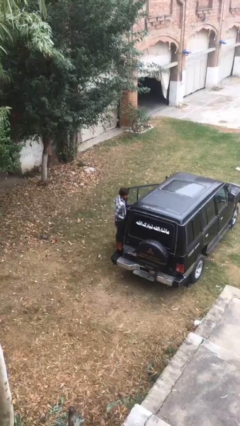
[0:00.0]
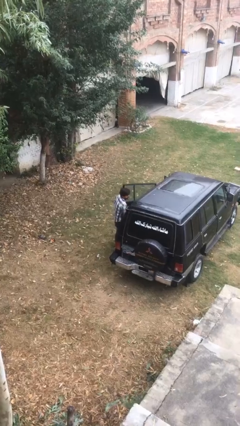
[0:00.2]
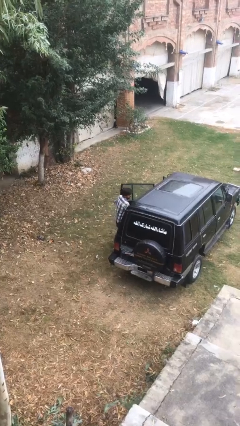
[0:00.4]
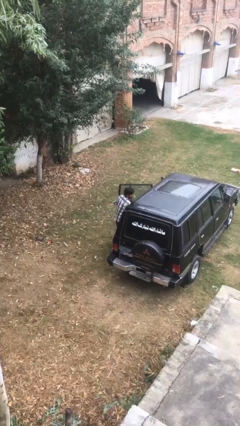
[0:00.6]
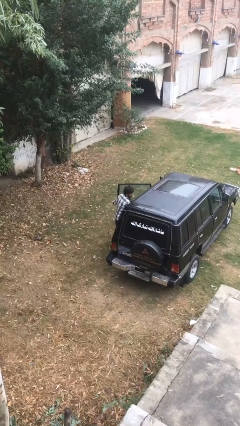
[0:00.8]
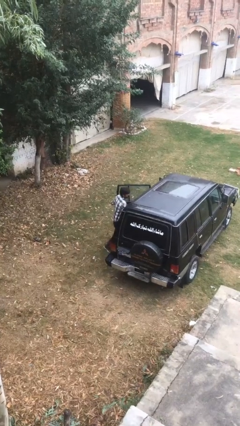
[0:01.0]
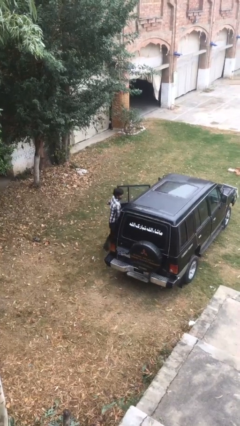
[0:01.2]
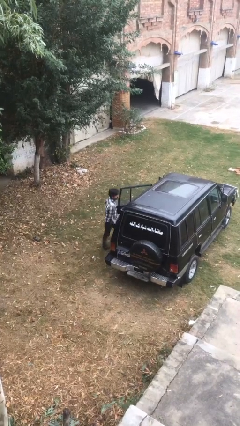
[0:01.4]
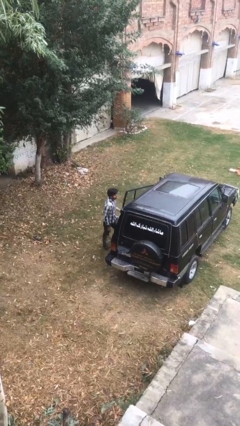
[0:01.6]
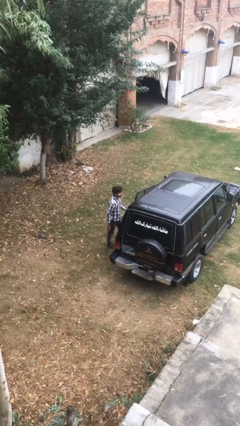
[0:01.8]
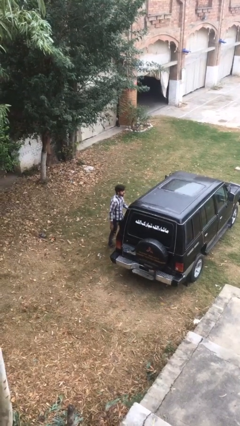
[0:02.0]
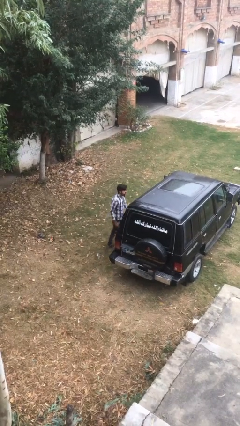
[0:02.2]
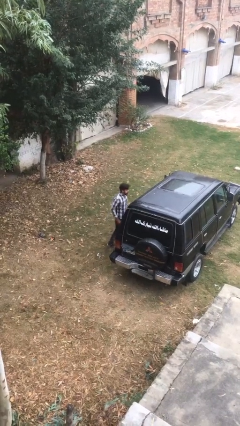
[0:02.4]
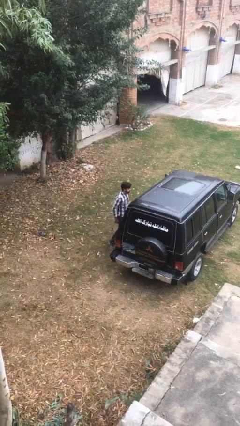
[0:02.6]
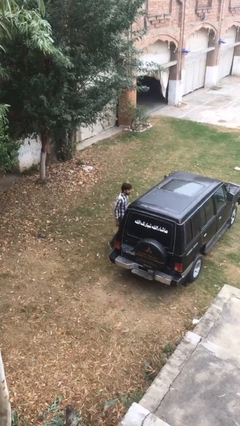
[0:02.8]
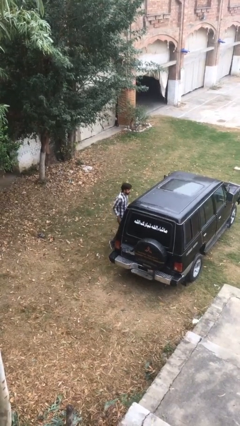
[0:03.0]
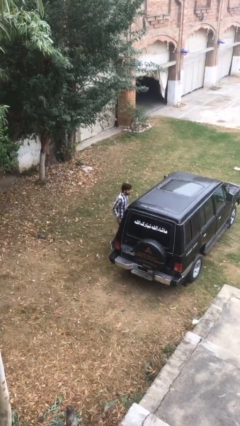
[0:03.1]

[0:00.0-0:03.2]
person loads car

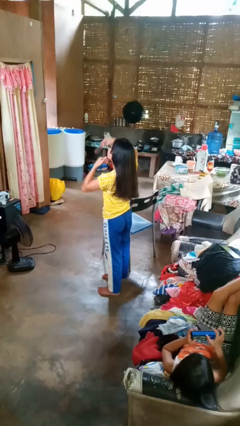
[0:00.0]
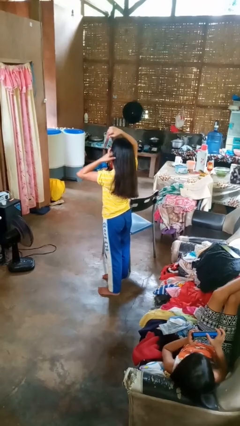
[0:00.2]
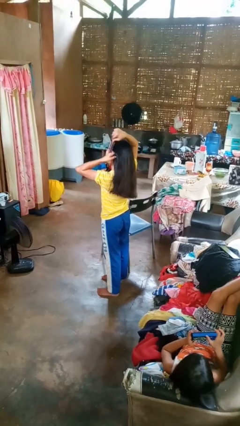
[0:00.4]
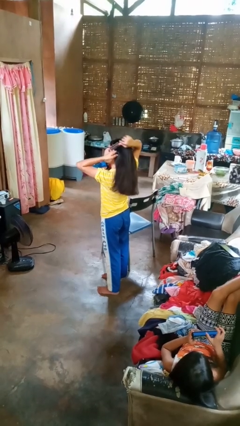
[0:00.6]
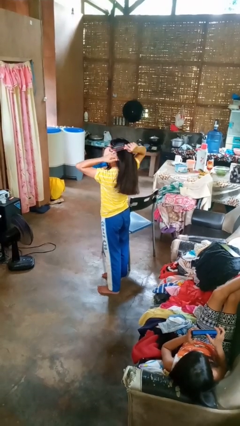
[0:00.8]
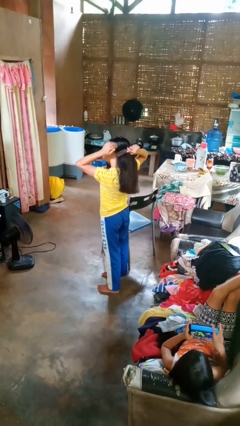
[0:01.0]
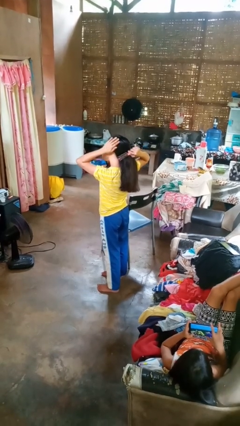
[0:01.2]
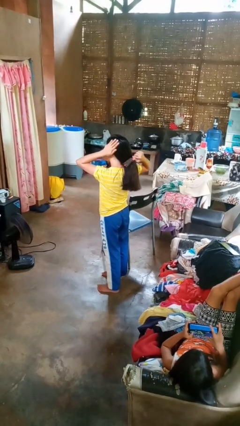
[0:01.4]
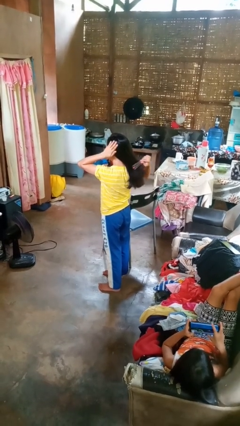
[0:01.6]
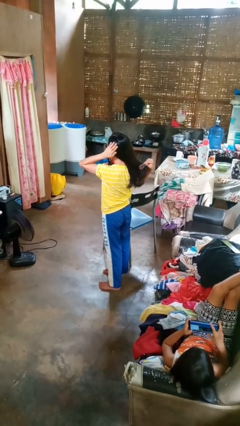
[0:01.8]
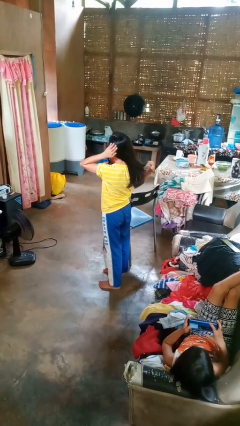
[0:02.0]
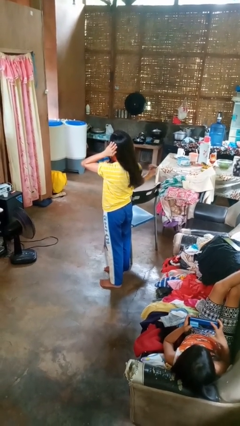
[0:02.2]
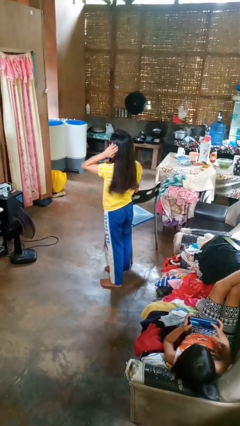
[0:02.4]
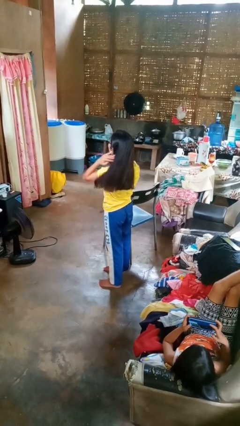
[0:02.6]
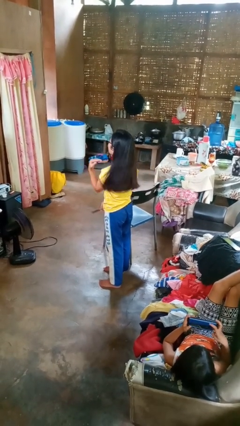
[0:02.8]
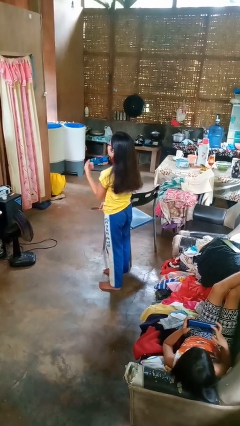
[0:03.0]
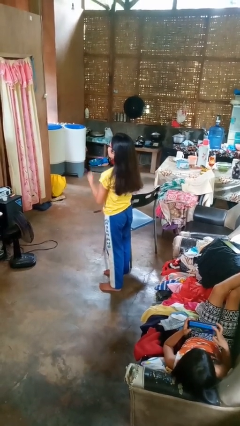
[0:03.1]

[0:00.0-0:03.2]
person brushes hair

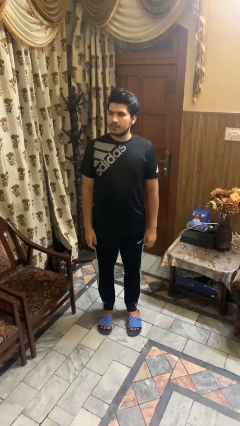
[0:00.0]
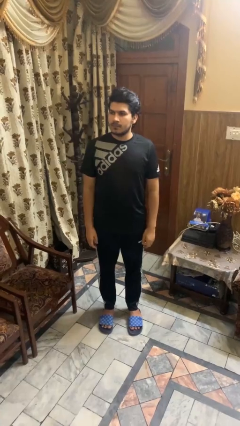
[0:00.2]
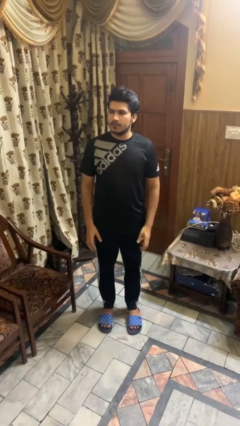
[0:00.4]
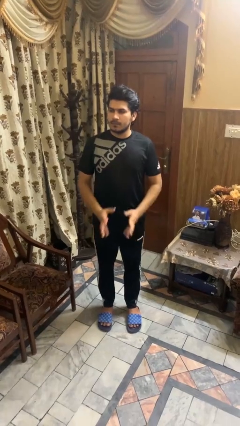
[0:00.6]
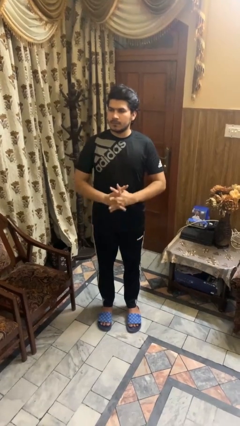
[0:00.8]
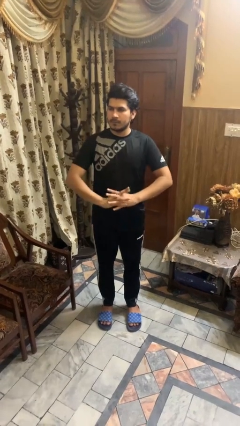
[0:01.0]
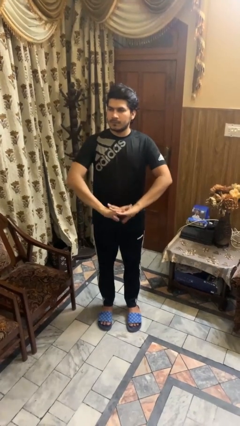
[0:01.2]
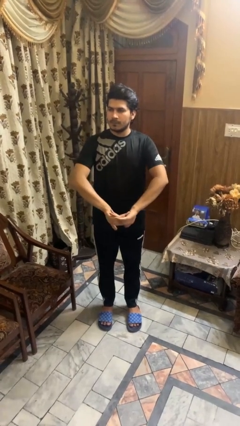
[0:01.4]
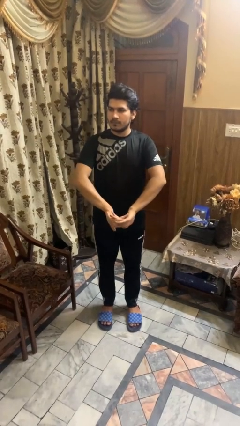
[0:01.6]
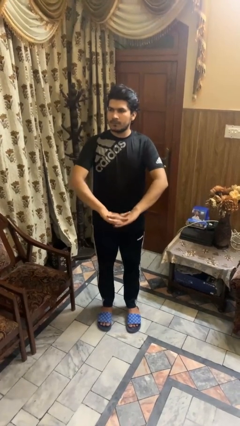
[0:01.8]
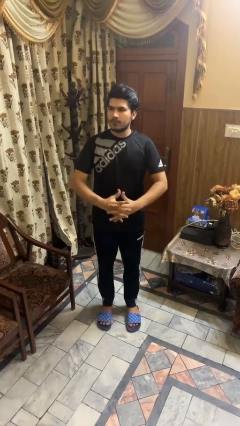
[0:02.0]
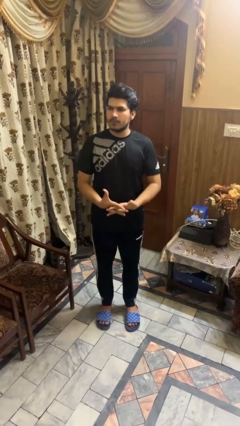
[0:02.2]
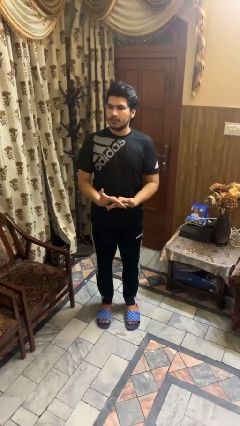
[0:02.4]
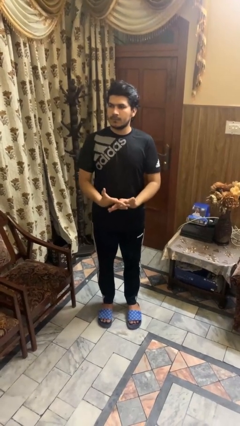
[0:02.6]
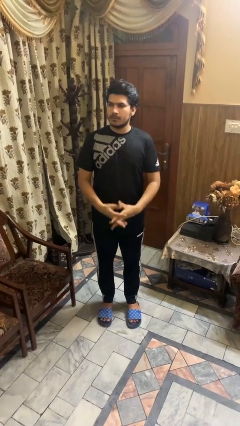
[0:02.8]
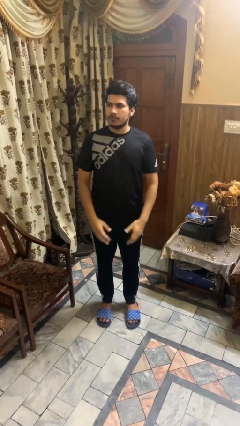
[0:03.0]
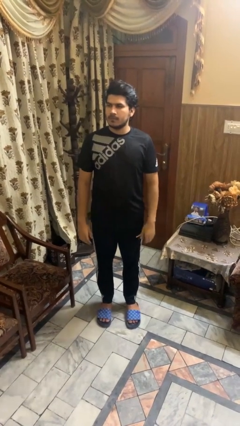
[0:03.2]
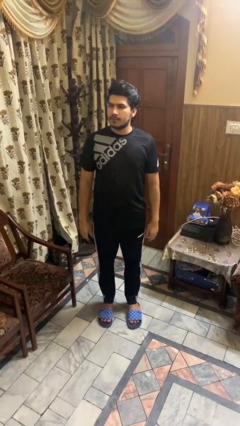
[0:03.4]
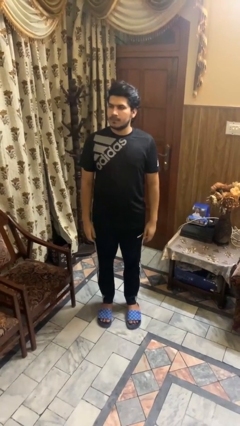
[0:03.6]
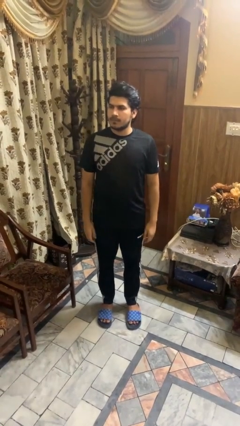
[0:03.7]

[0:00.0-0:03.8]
person cracks knuckles

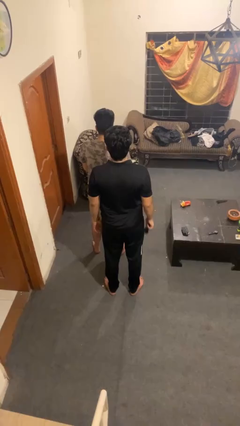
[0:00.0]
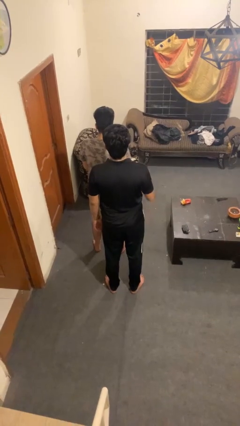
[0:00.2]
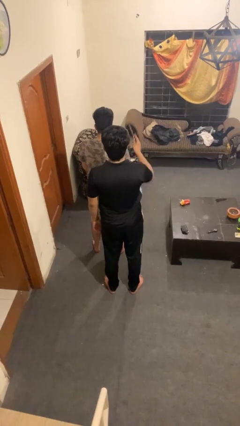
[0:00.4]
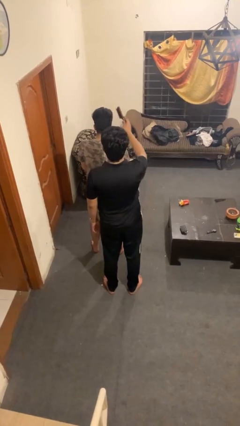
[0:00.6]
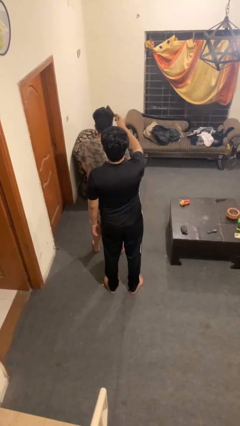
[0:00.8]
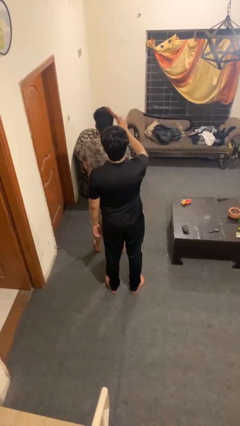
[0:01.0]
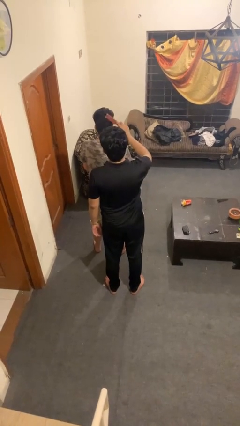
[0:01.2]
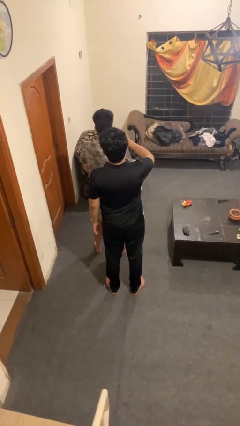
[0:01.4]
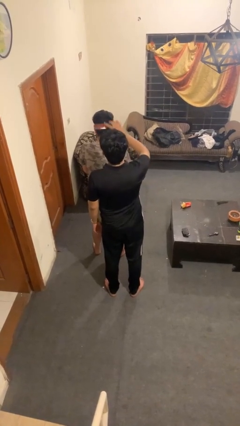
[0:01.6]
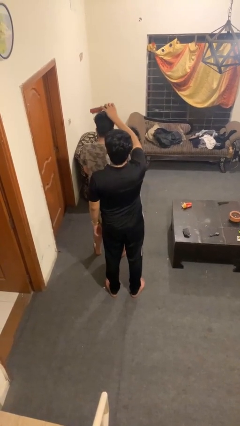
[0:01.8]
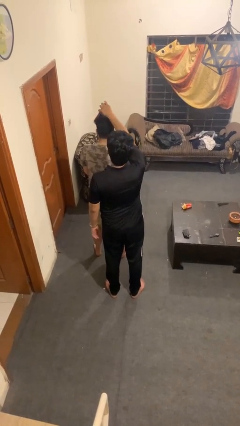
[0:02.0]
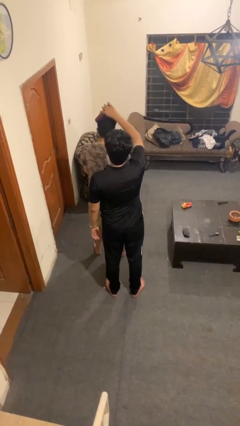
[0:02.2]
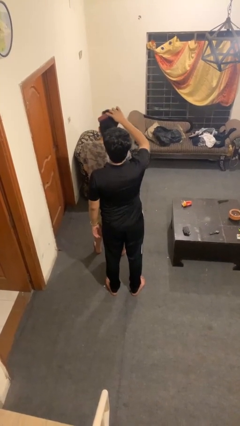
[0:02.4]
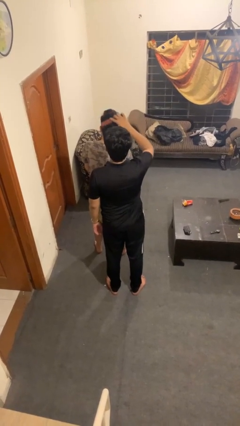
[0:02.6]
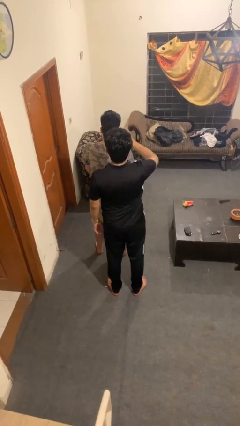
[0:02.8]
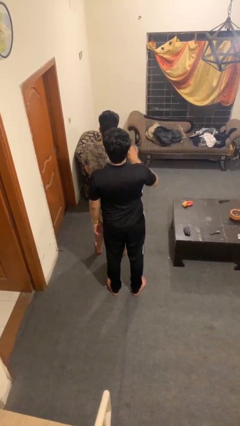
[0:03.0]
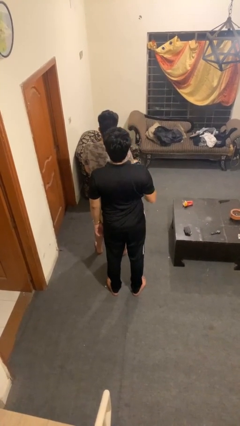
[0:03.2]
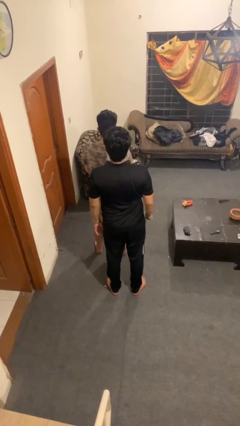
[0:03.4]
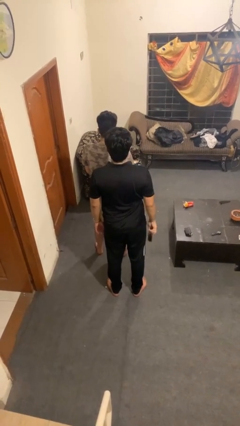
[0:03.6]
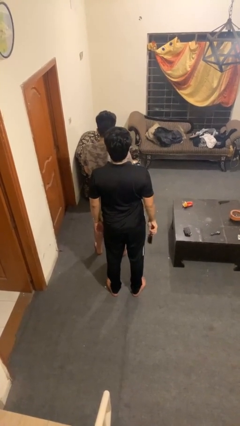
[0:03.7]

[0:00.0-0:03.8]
person brushes hair of person

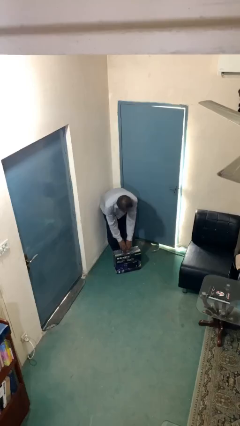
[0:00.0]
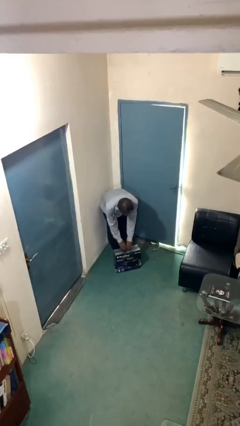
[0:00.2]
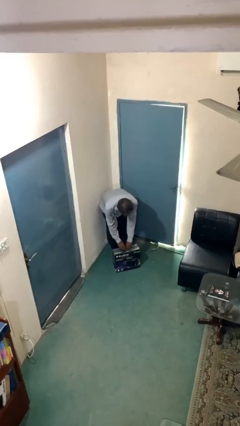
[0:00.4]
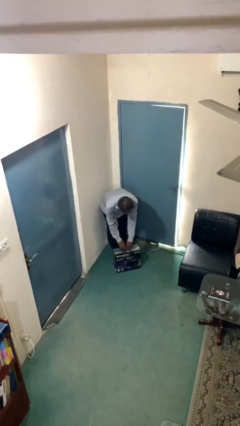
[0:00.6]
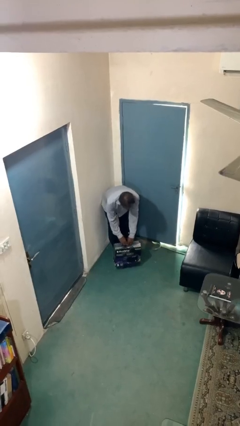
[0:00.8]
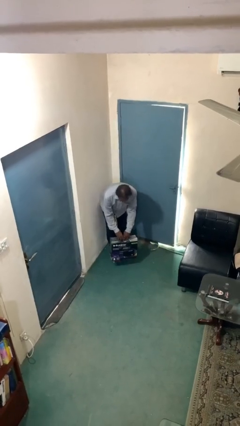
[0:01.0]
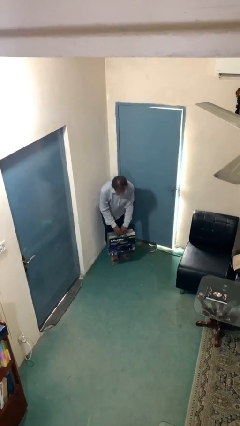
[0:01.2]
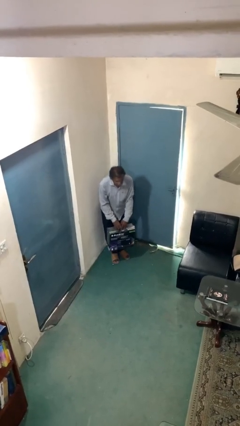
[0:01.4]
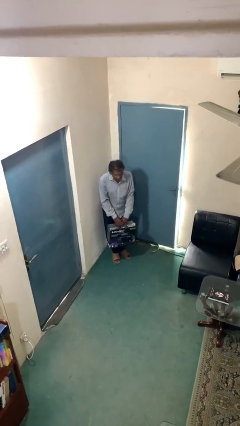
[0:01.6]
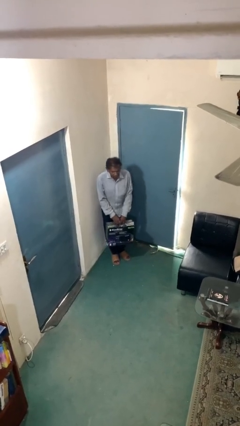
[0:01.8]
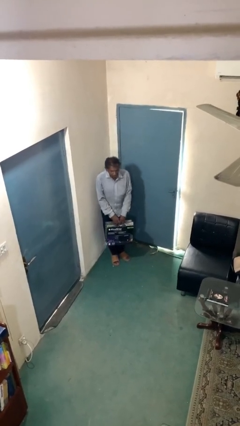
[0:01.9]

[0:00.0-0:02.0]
person picks up object from floor

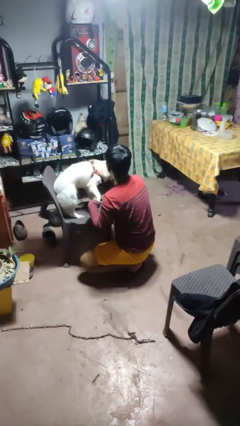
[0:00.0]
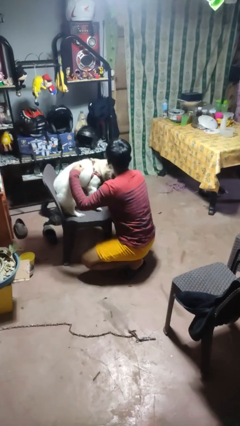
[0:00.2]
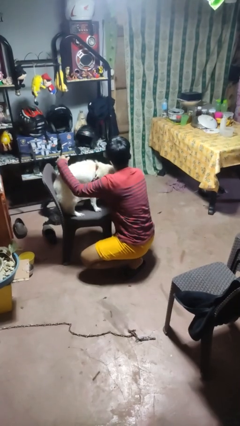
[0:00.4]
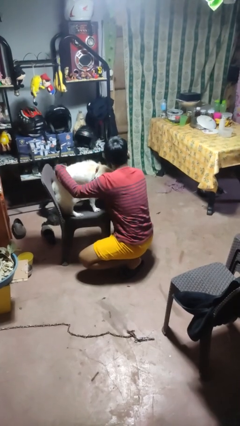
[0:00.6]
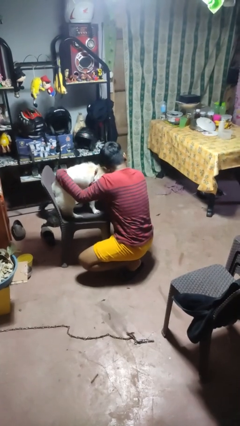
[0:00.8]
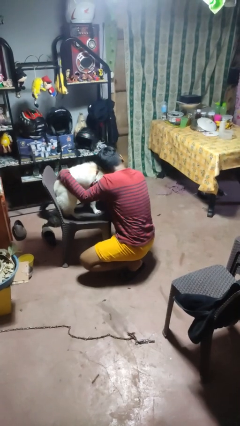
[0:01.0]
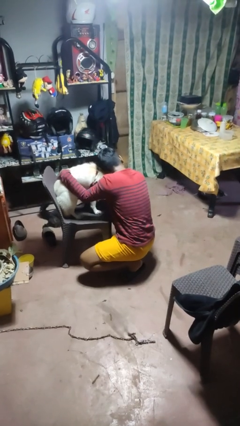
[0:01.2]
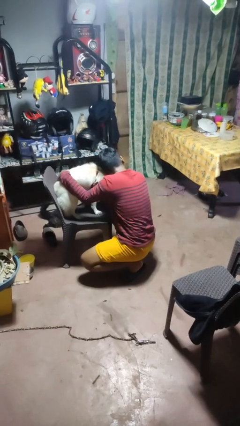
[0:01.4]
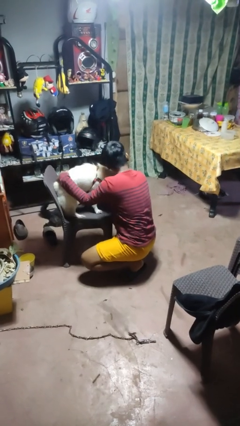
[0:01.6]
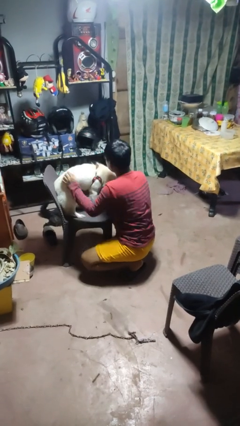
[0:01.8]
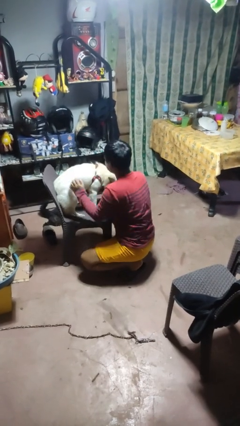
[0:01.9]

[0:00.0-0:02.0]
person hugs dog
